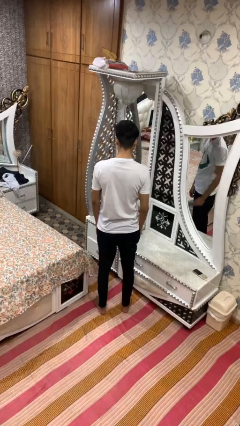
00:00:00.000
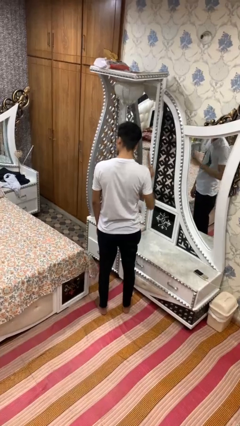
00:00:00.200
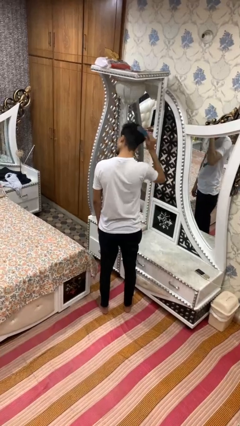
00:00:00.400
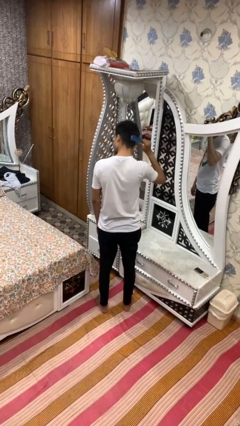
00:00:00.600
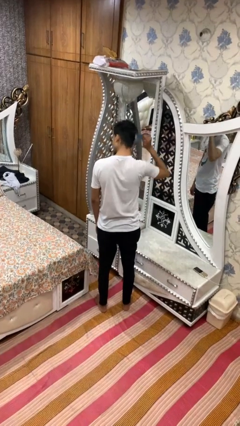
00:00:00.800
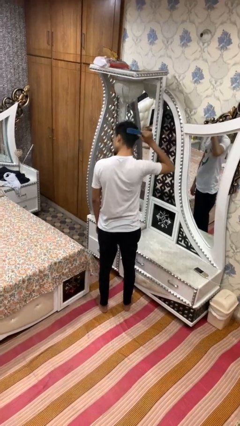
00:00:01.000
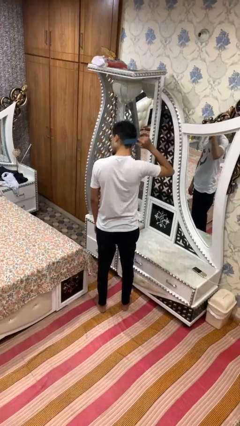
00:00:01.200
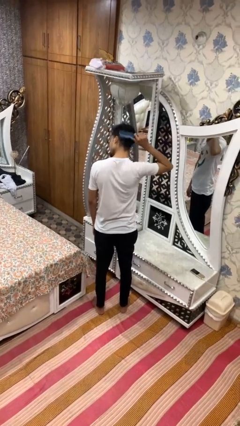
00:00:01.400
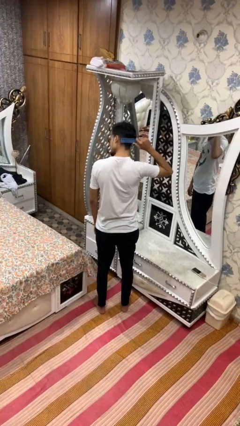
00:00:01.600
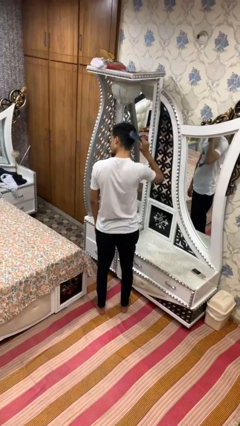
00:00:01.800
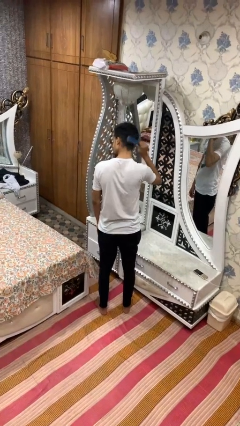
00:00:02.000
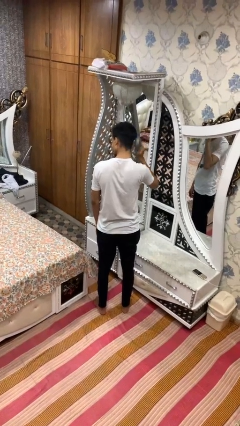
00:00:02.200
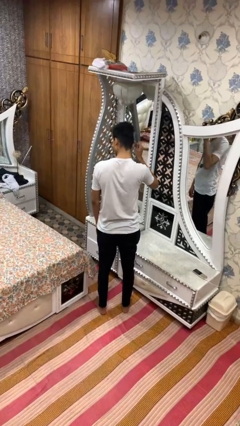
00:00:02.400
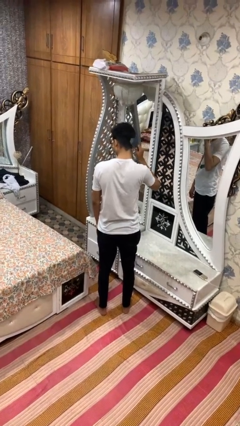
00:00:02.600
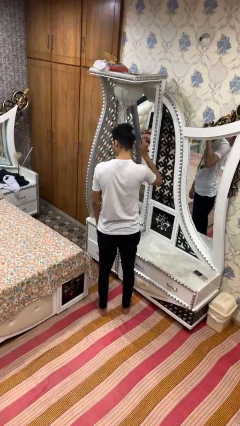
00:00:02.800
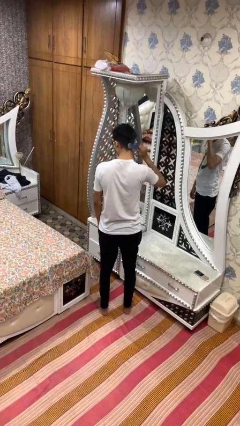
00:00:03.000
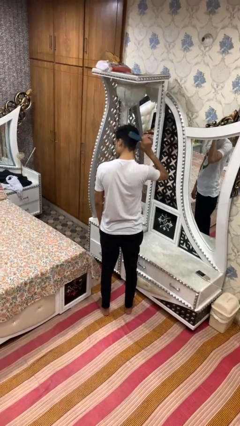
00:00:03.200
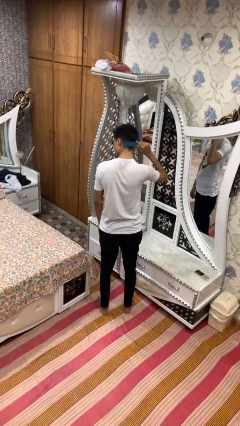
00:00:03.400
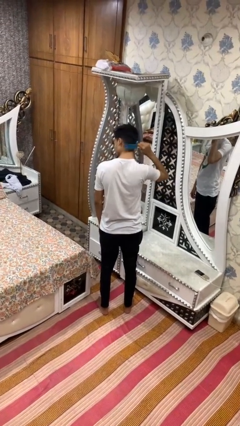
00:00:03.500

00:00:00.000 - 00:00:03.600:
person brushes hair

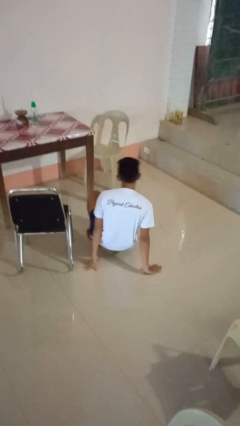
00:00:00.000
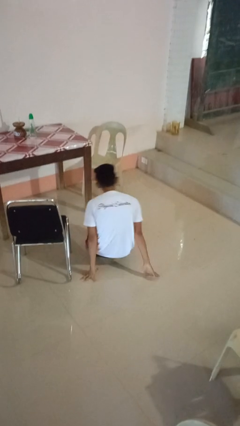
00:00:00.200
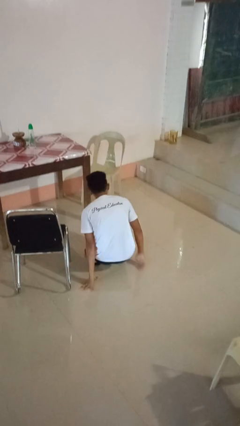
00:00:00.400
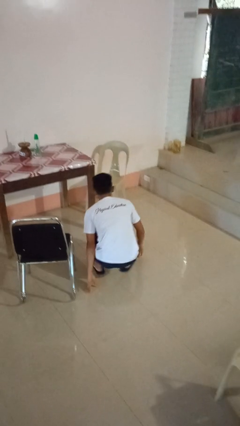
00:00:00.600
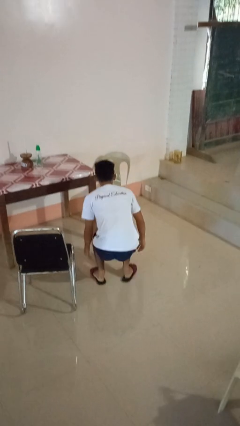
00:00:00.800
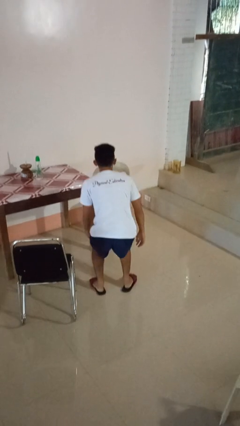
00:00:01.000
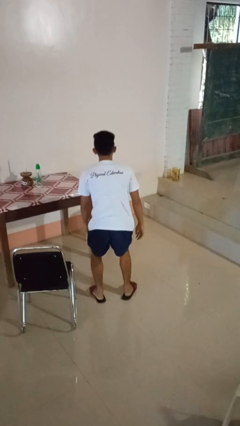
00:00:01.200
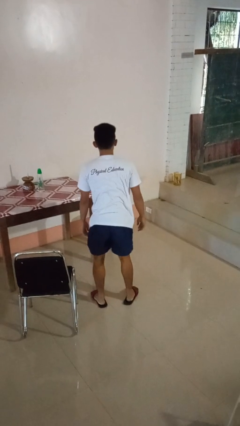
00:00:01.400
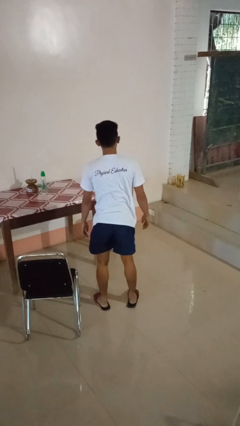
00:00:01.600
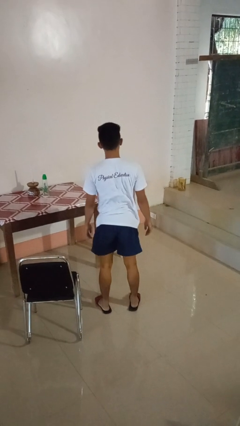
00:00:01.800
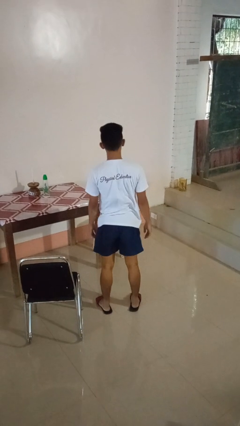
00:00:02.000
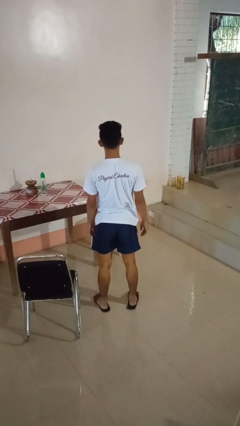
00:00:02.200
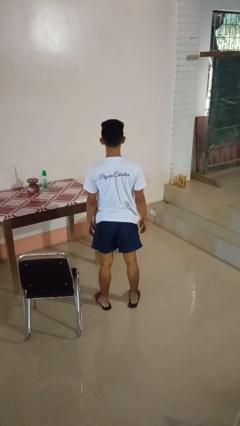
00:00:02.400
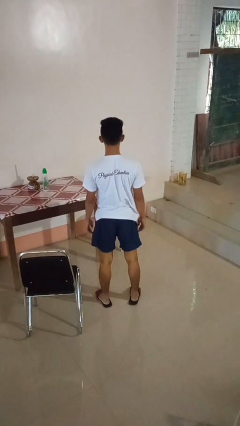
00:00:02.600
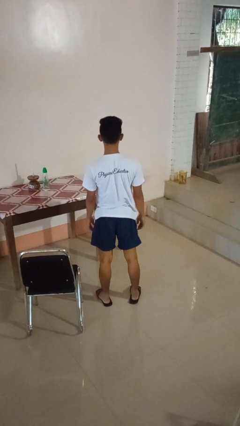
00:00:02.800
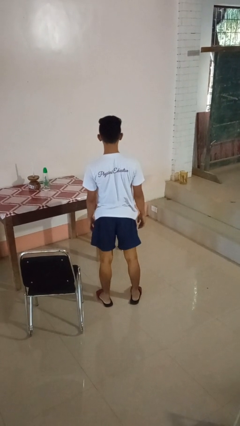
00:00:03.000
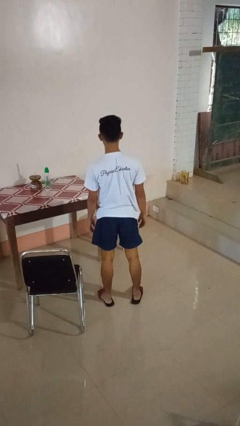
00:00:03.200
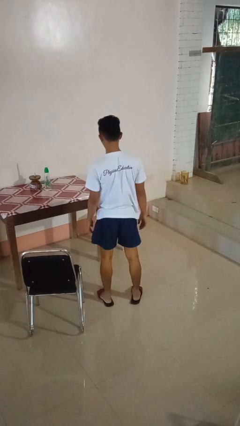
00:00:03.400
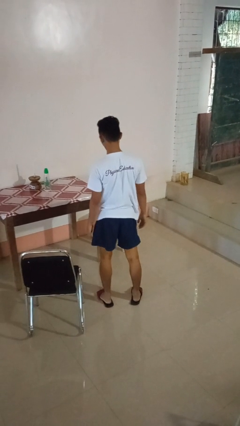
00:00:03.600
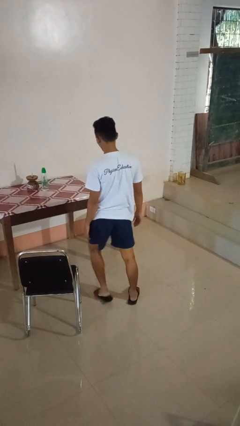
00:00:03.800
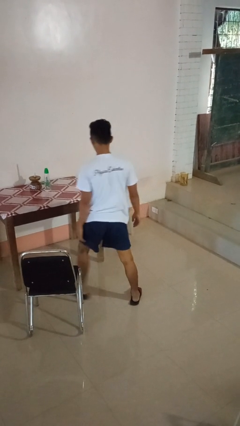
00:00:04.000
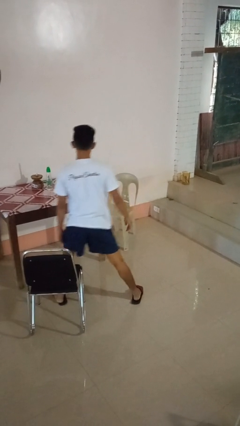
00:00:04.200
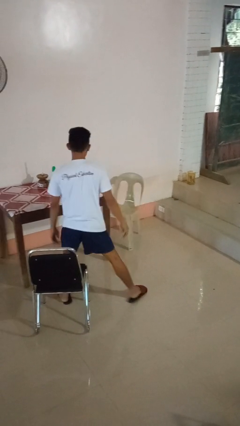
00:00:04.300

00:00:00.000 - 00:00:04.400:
person stands up from floor

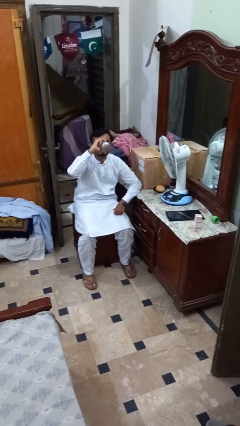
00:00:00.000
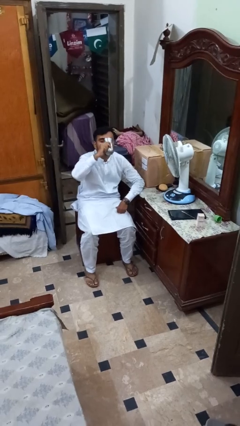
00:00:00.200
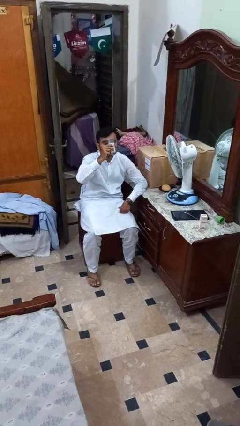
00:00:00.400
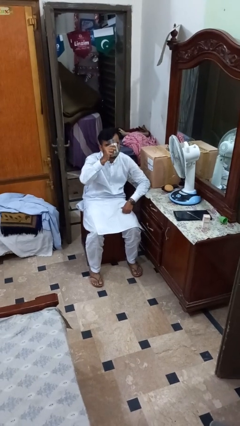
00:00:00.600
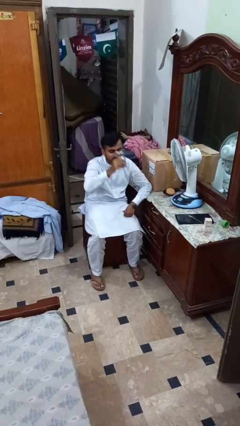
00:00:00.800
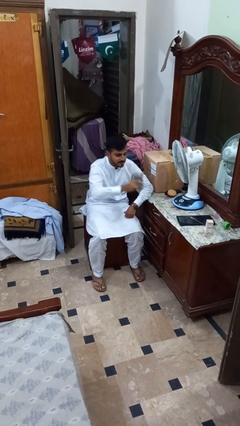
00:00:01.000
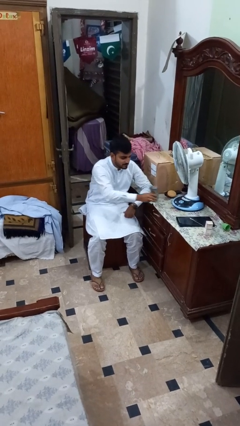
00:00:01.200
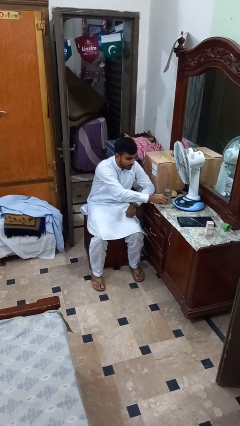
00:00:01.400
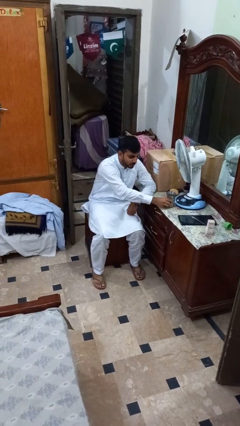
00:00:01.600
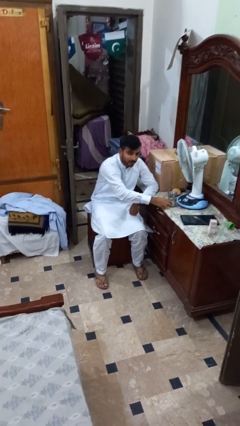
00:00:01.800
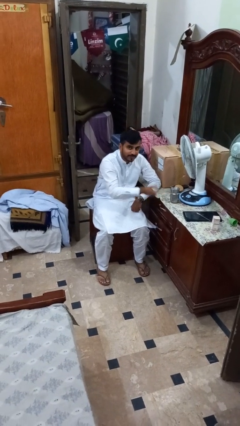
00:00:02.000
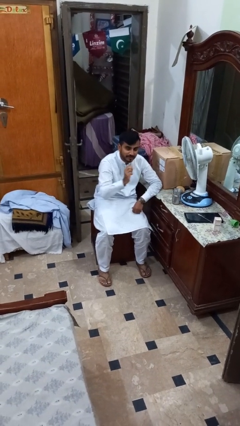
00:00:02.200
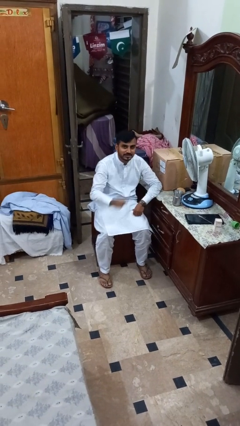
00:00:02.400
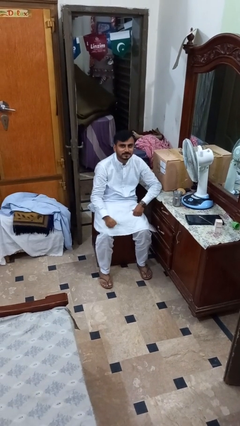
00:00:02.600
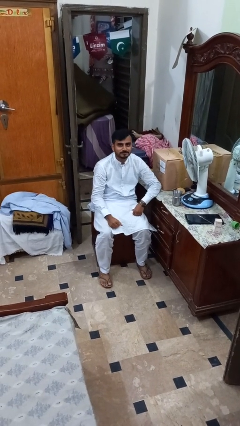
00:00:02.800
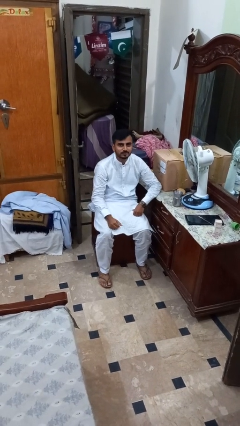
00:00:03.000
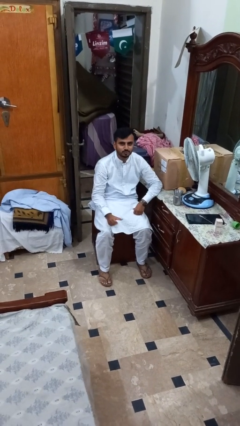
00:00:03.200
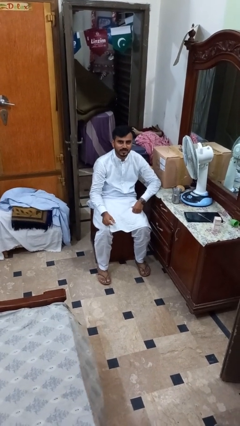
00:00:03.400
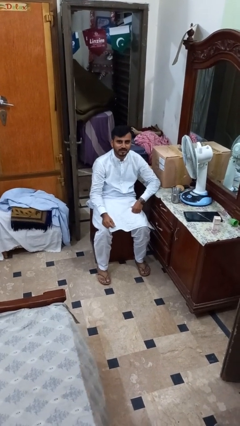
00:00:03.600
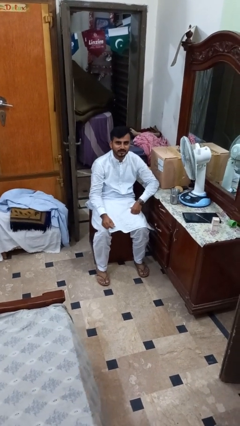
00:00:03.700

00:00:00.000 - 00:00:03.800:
person puts down object on table

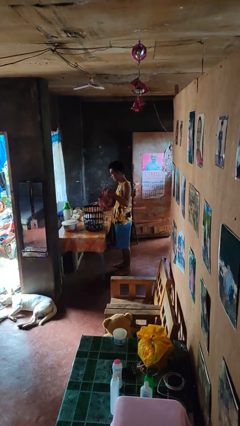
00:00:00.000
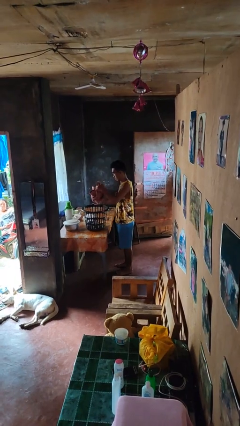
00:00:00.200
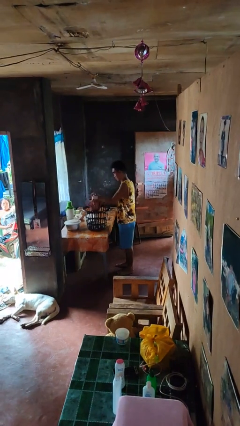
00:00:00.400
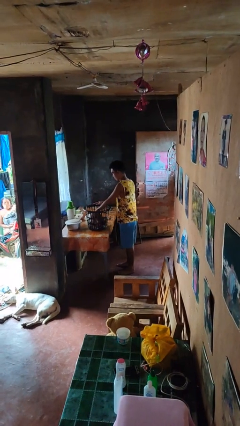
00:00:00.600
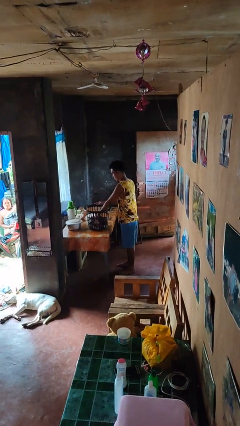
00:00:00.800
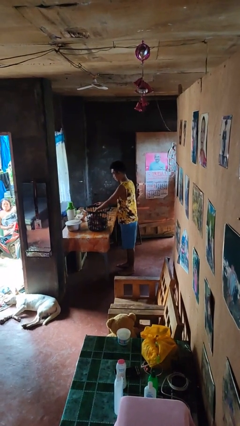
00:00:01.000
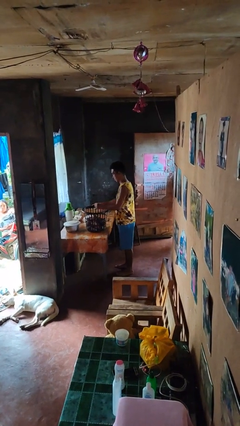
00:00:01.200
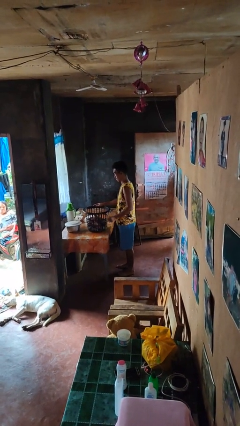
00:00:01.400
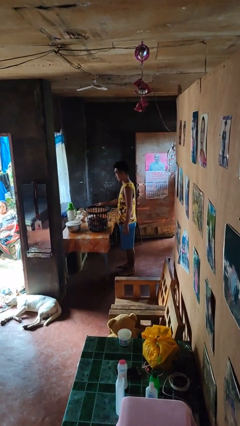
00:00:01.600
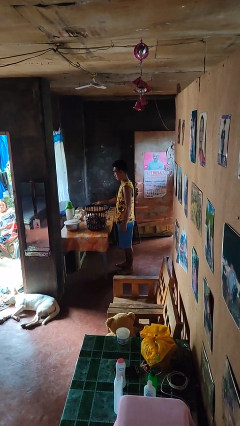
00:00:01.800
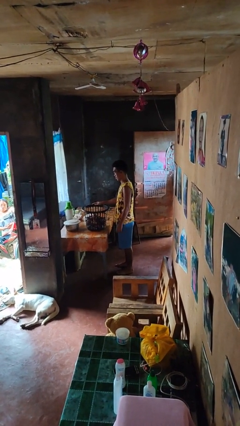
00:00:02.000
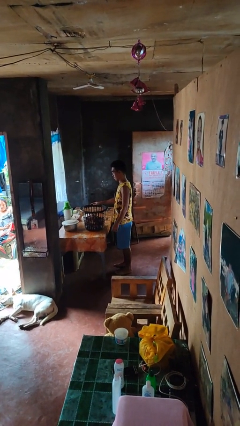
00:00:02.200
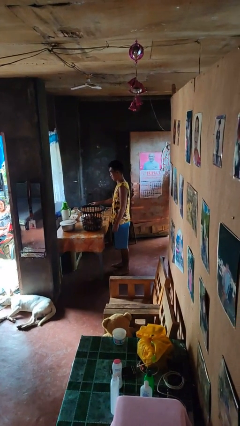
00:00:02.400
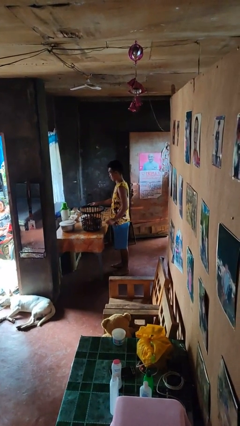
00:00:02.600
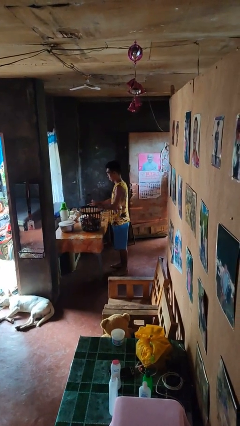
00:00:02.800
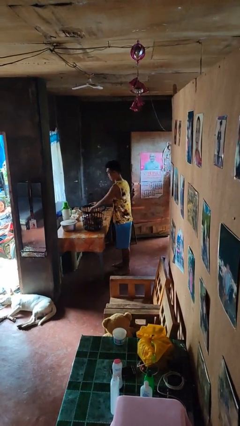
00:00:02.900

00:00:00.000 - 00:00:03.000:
person puts object into basket

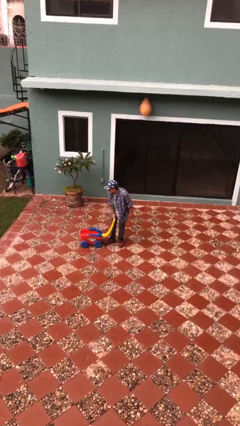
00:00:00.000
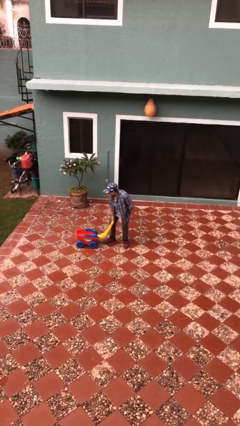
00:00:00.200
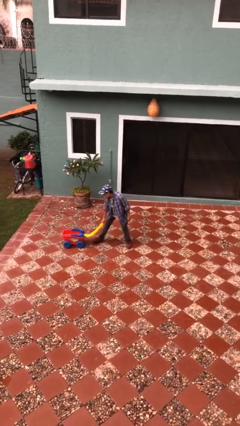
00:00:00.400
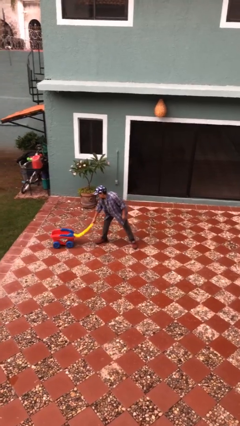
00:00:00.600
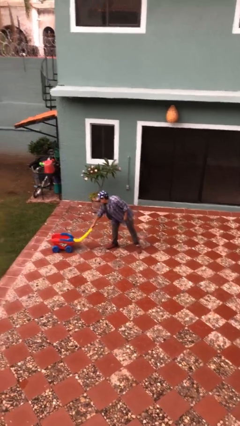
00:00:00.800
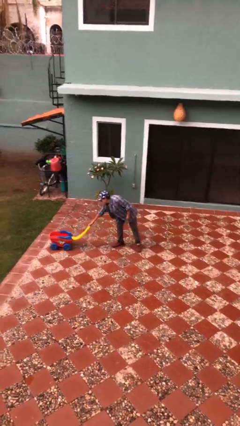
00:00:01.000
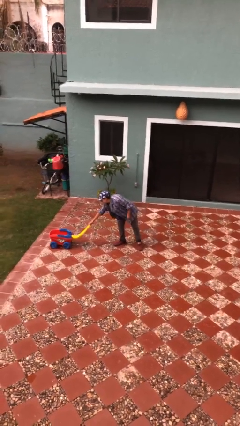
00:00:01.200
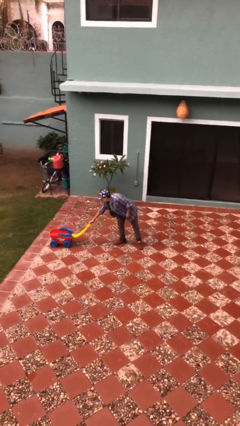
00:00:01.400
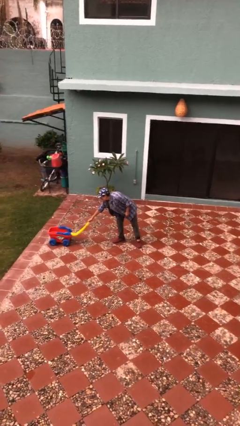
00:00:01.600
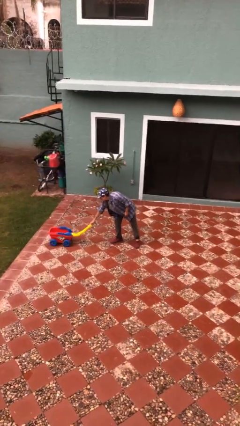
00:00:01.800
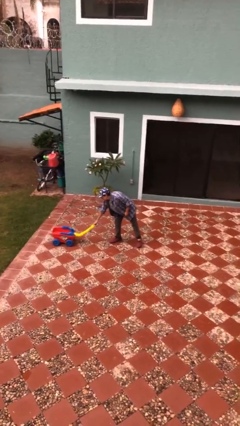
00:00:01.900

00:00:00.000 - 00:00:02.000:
person pushes wheeled cart

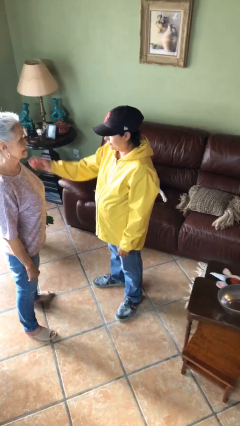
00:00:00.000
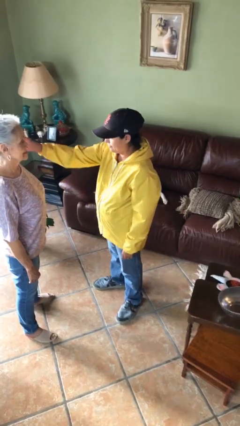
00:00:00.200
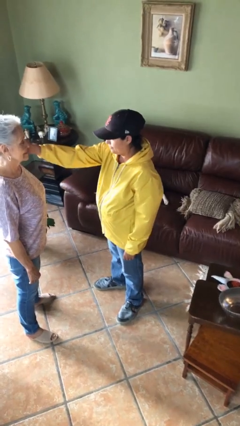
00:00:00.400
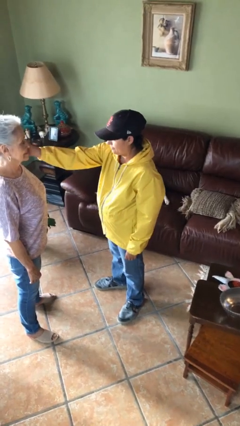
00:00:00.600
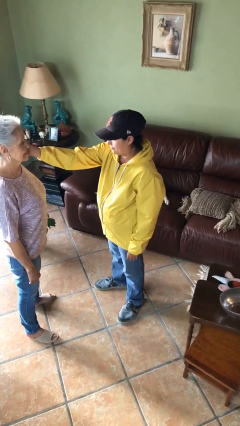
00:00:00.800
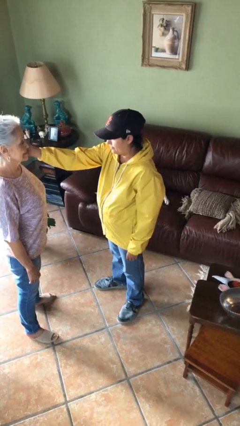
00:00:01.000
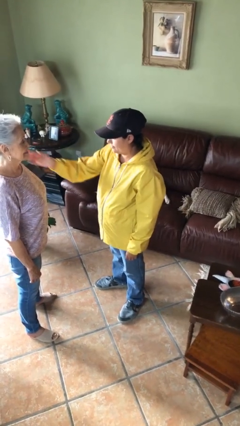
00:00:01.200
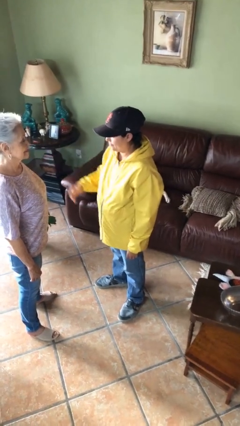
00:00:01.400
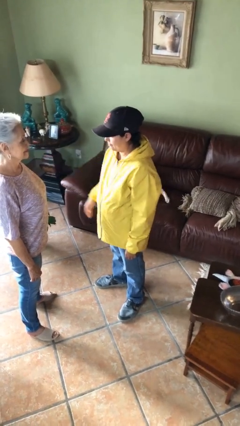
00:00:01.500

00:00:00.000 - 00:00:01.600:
person touches face of person
